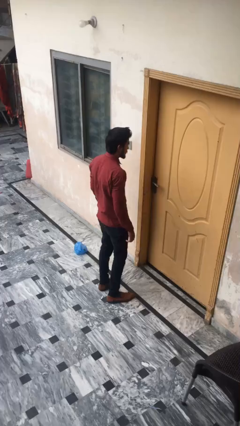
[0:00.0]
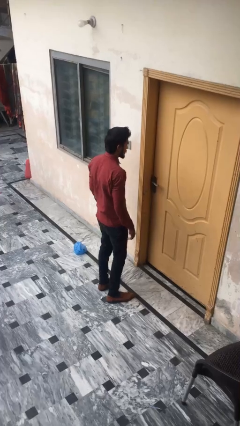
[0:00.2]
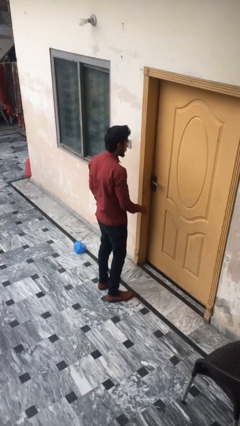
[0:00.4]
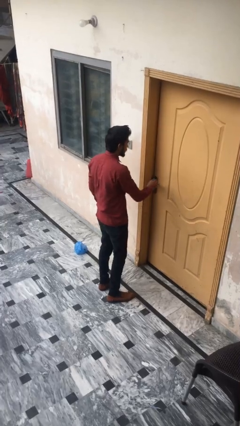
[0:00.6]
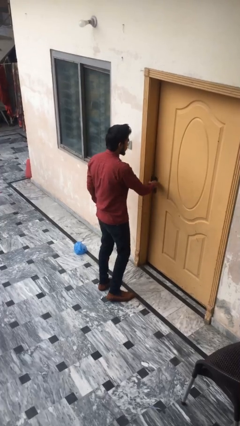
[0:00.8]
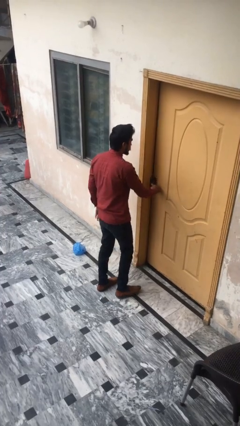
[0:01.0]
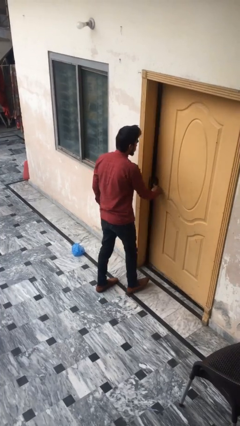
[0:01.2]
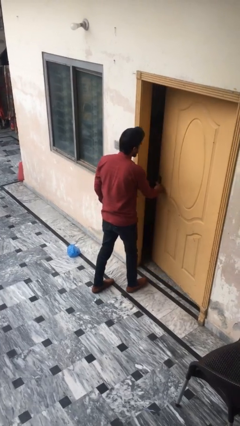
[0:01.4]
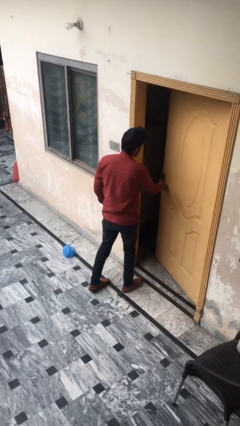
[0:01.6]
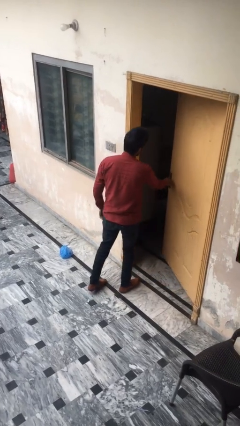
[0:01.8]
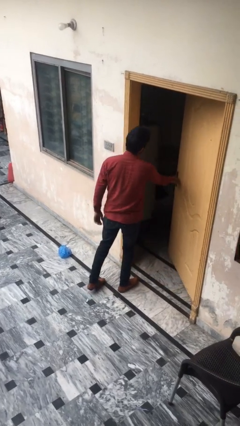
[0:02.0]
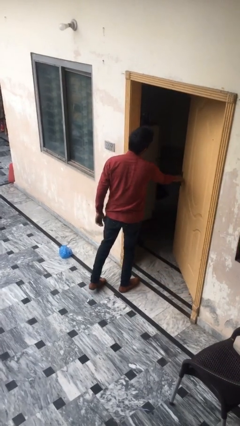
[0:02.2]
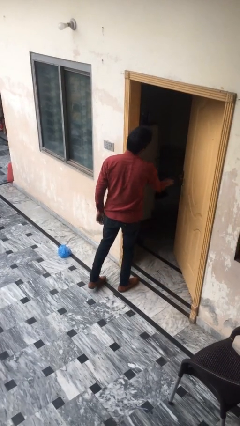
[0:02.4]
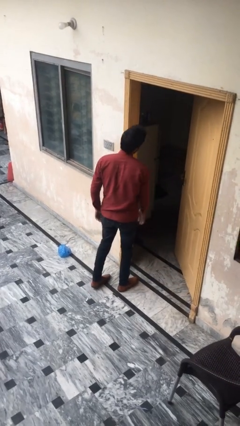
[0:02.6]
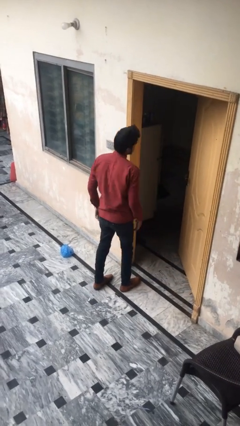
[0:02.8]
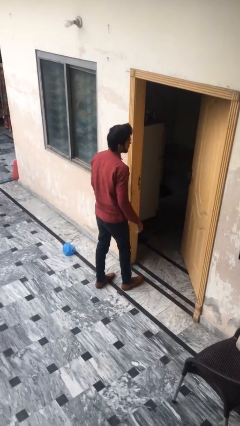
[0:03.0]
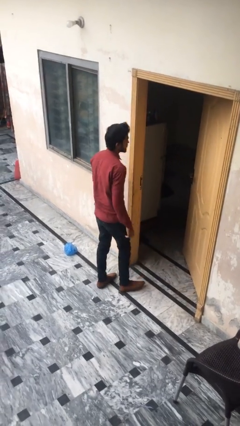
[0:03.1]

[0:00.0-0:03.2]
person opens facility door

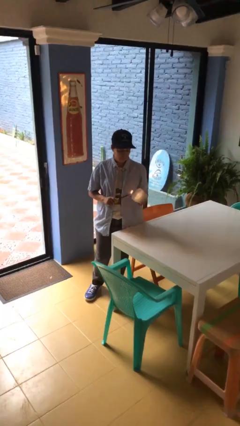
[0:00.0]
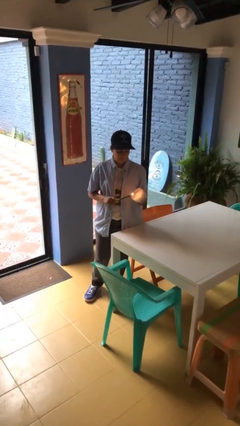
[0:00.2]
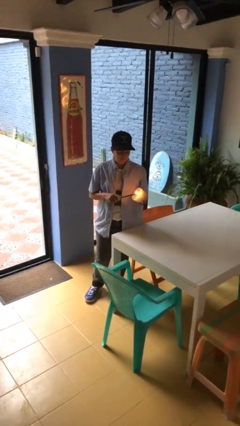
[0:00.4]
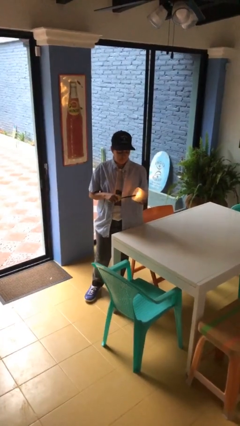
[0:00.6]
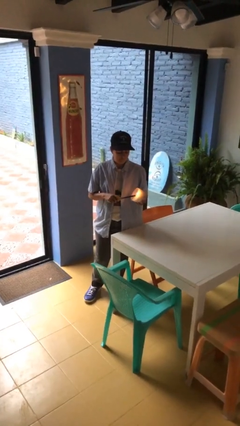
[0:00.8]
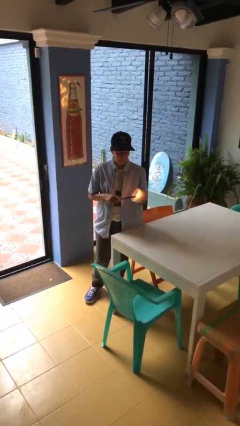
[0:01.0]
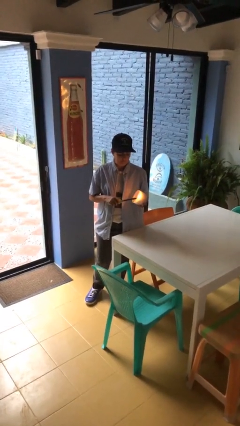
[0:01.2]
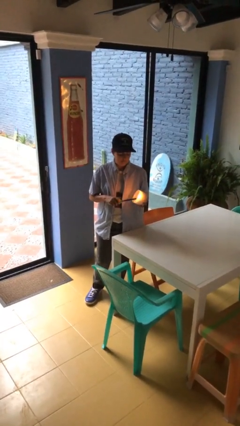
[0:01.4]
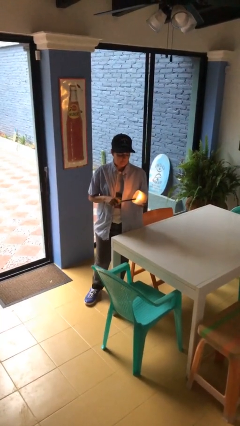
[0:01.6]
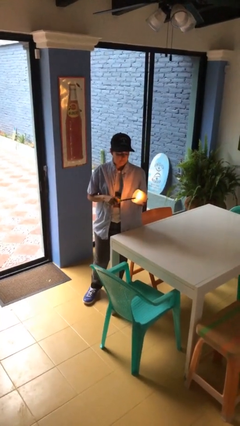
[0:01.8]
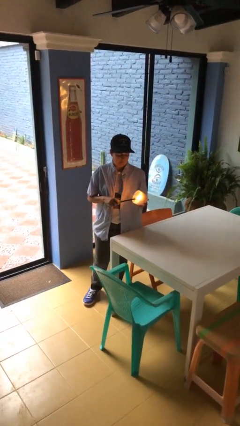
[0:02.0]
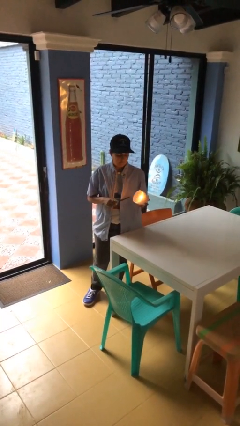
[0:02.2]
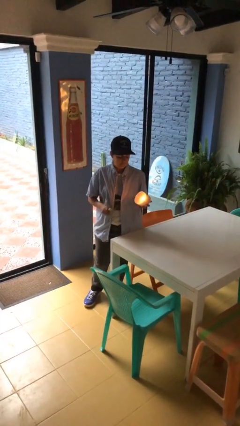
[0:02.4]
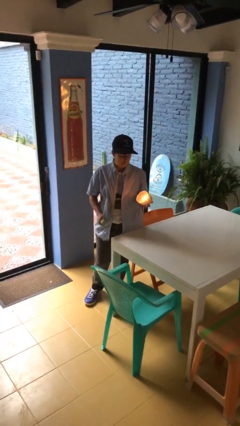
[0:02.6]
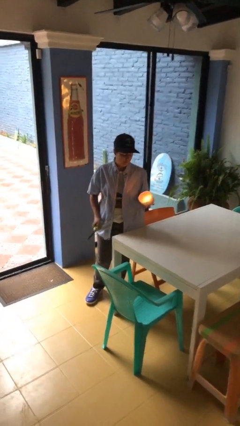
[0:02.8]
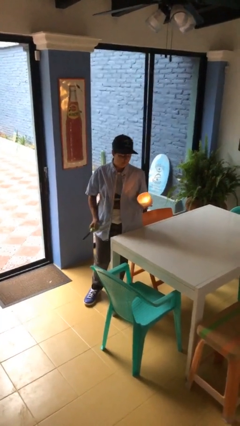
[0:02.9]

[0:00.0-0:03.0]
person lights candle

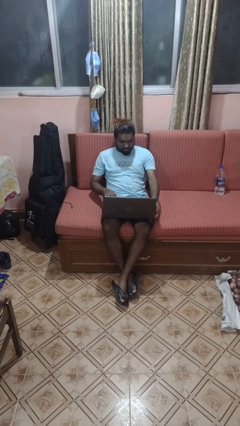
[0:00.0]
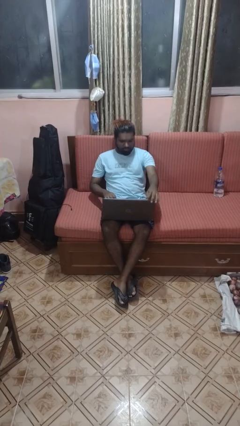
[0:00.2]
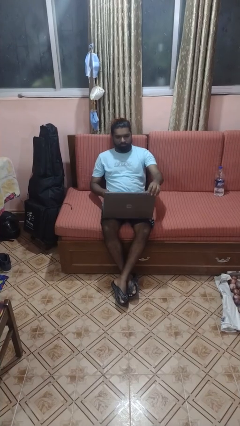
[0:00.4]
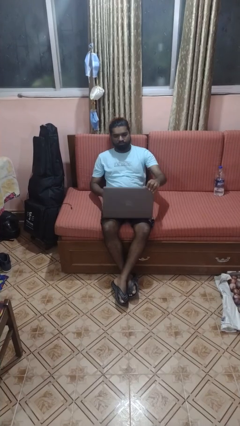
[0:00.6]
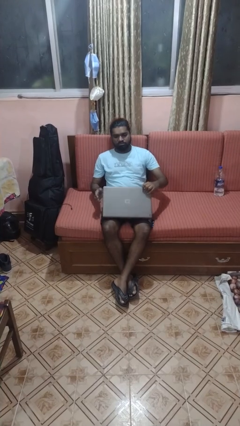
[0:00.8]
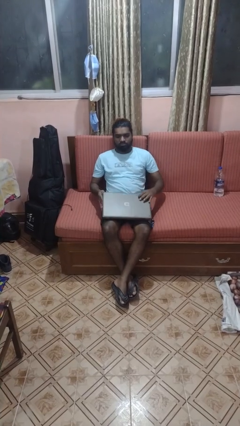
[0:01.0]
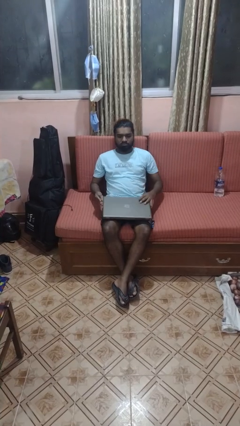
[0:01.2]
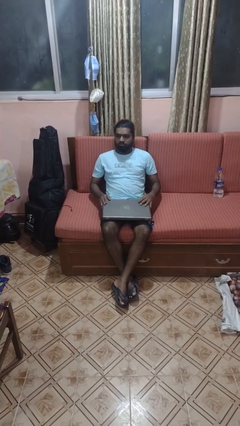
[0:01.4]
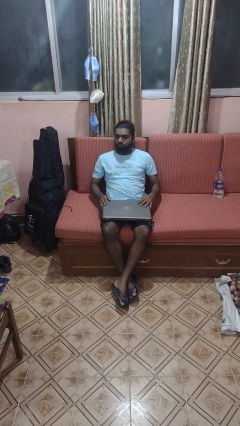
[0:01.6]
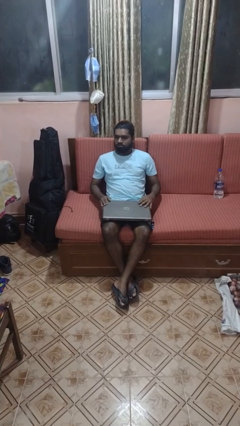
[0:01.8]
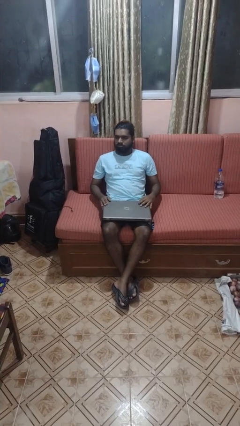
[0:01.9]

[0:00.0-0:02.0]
person closes laptop

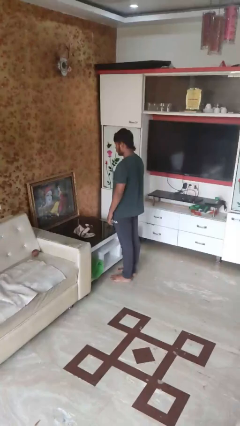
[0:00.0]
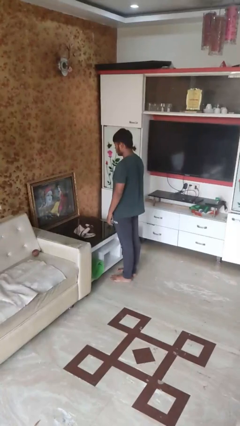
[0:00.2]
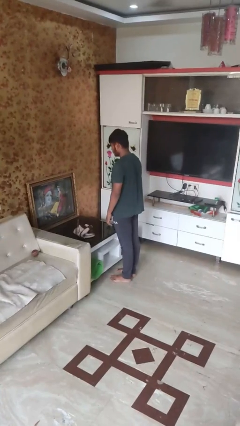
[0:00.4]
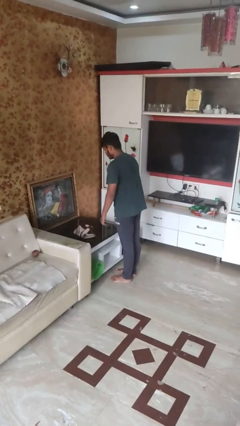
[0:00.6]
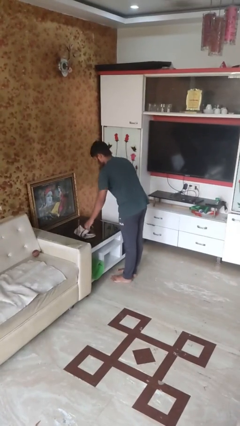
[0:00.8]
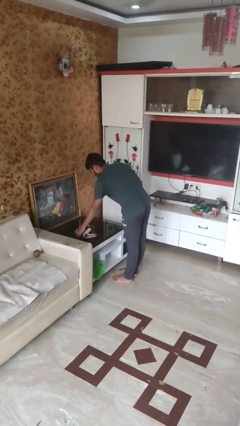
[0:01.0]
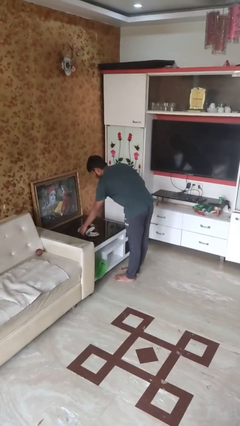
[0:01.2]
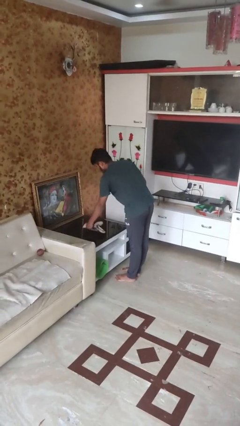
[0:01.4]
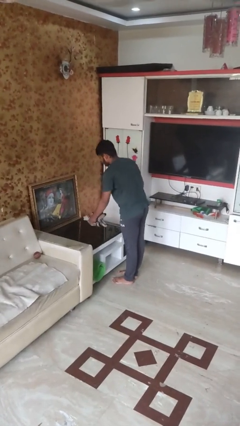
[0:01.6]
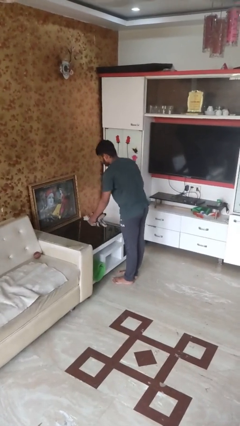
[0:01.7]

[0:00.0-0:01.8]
person picks up object from table

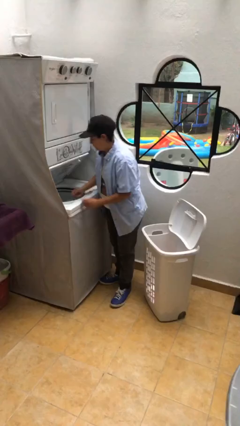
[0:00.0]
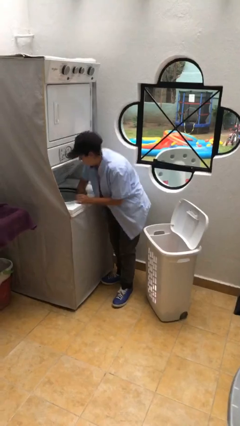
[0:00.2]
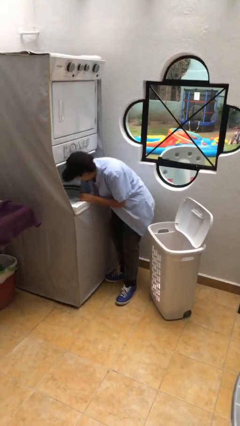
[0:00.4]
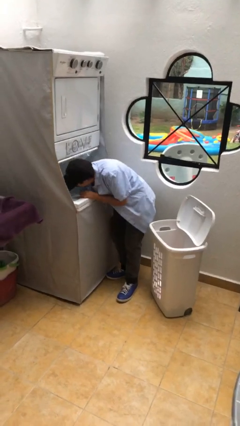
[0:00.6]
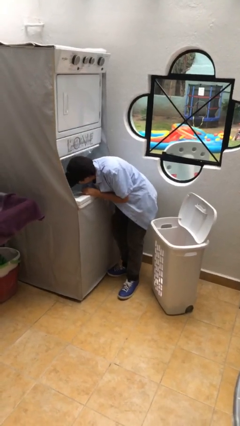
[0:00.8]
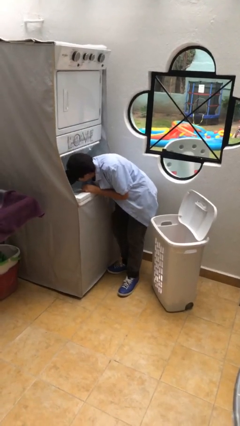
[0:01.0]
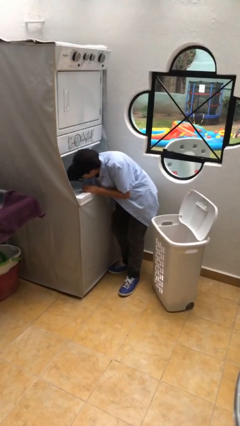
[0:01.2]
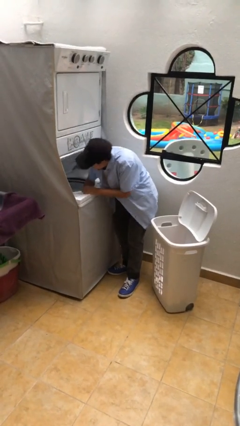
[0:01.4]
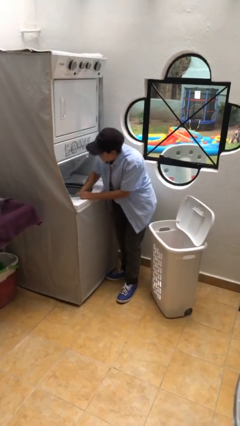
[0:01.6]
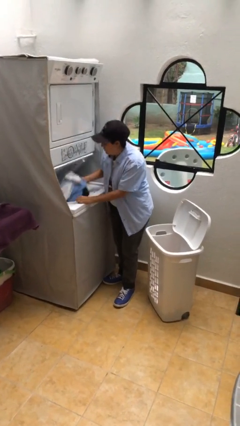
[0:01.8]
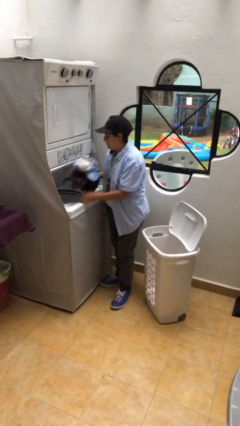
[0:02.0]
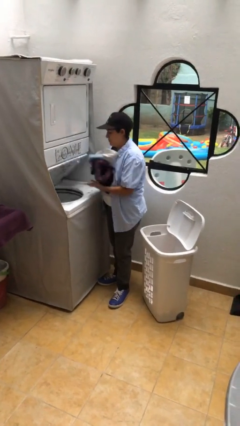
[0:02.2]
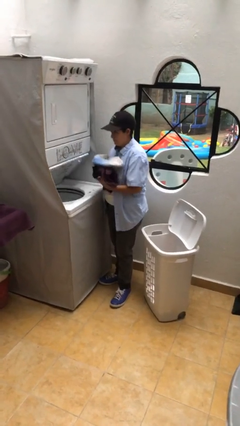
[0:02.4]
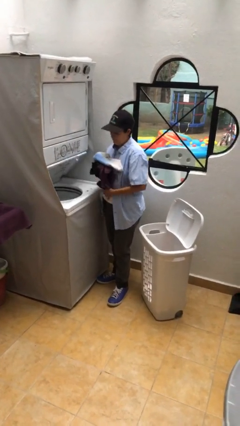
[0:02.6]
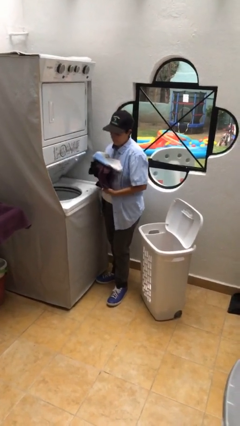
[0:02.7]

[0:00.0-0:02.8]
person unloads clotheswasher

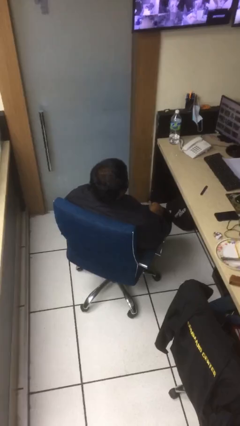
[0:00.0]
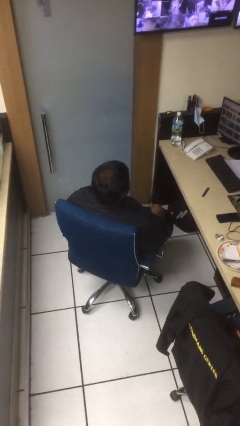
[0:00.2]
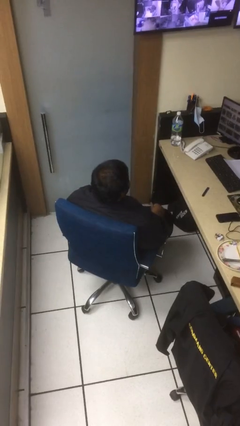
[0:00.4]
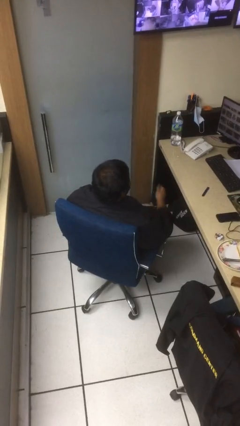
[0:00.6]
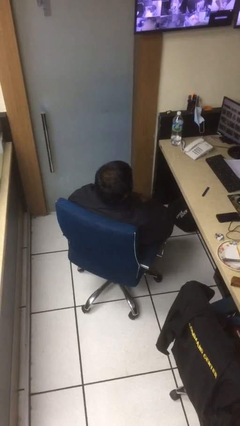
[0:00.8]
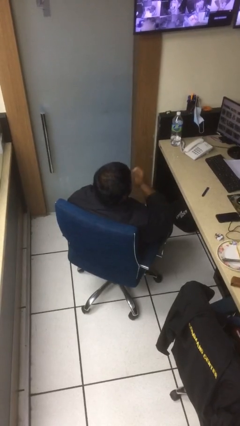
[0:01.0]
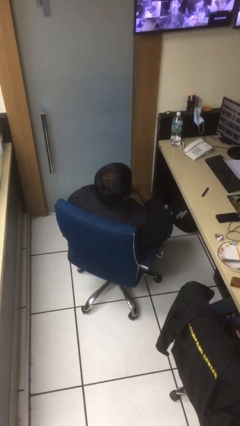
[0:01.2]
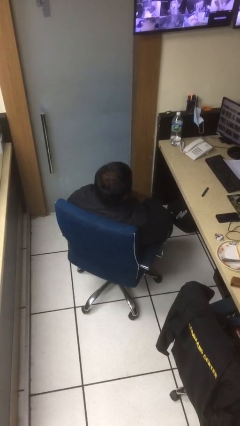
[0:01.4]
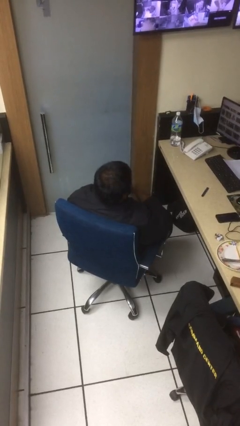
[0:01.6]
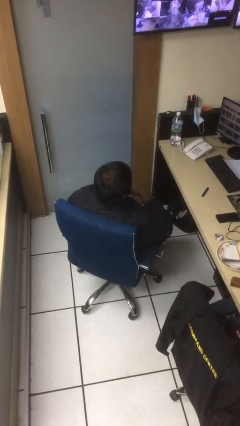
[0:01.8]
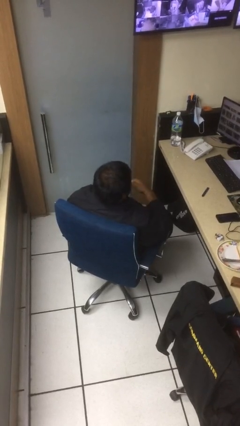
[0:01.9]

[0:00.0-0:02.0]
person drums on chest

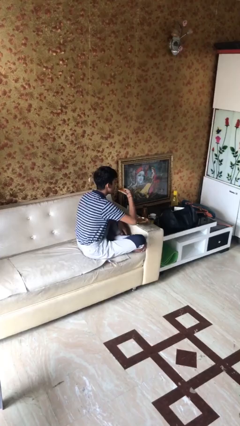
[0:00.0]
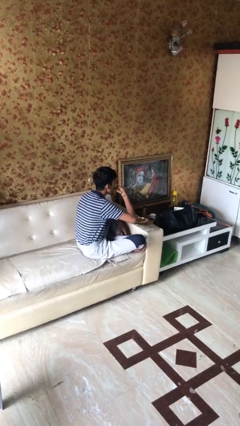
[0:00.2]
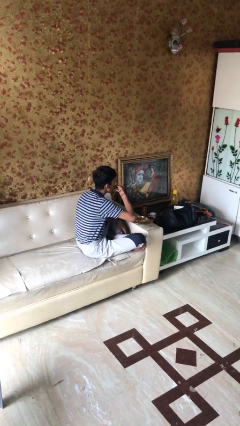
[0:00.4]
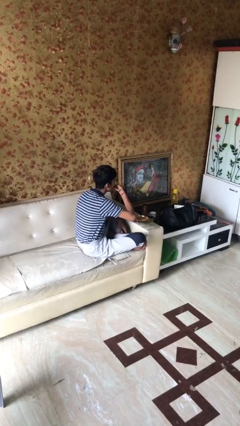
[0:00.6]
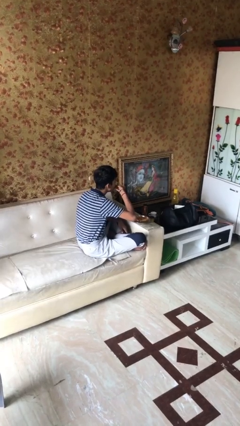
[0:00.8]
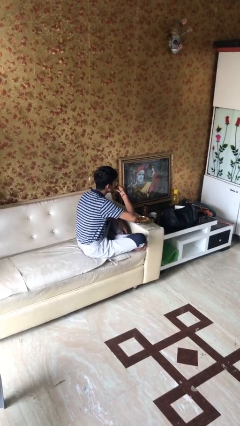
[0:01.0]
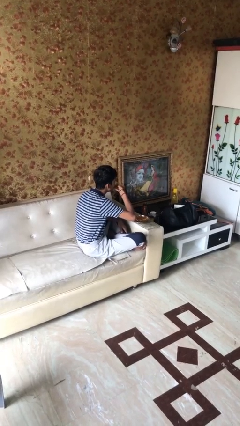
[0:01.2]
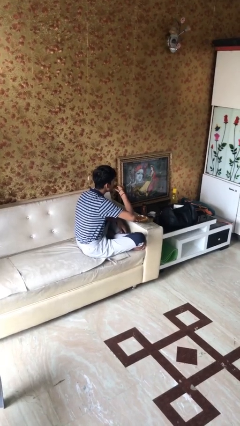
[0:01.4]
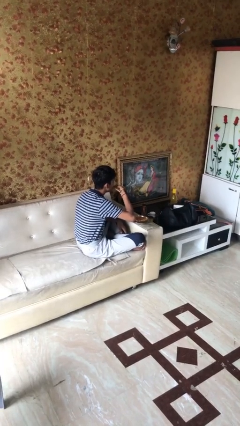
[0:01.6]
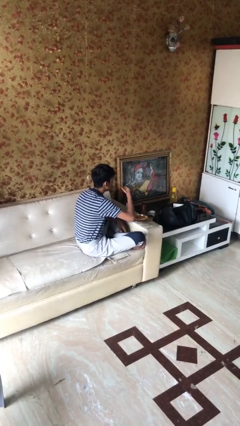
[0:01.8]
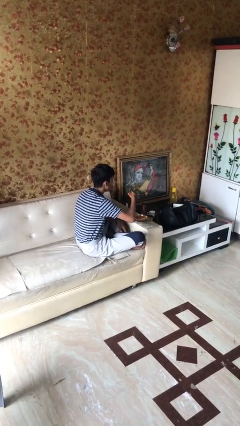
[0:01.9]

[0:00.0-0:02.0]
person eats with hands

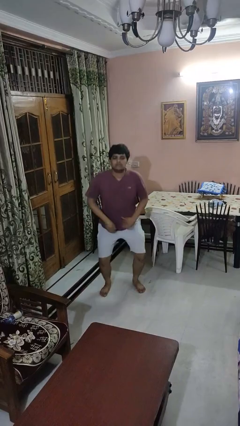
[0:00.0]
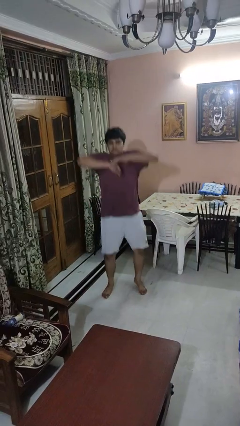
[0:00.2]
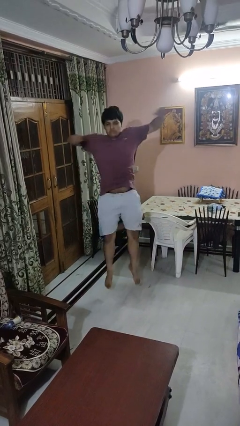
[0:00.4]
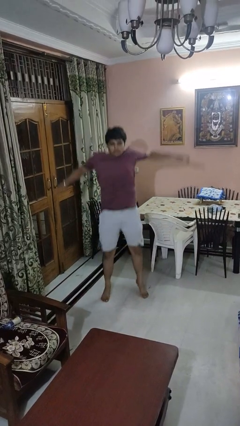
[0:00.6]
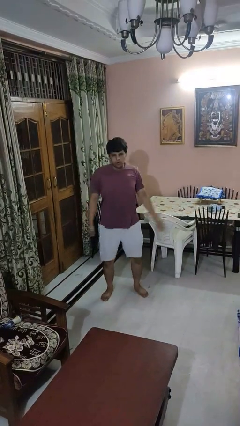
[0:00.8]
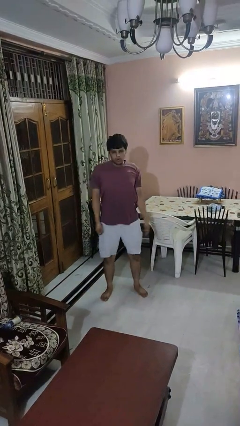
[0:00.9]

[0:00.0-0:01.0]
person jumps
